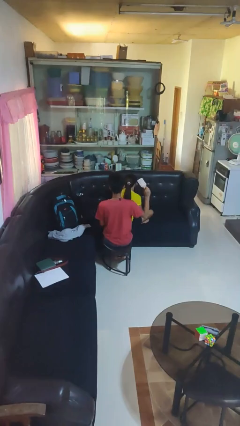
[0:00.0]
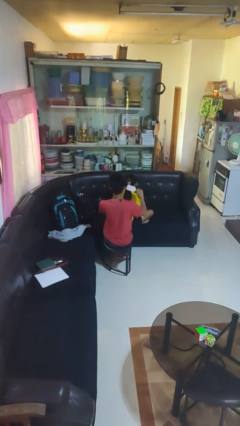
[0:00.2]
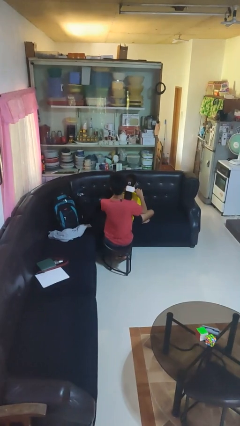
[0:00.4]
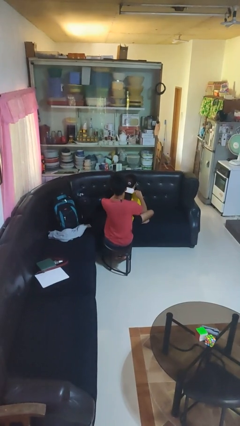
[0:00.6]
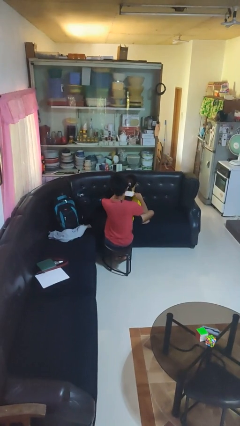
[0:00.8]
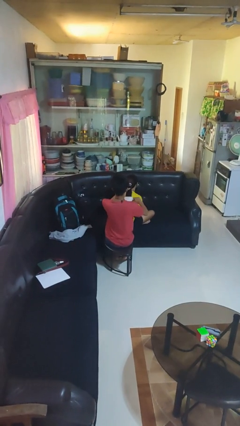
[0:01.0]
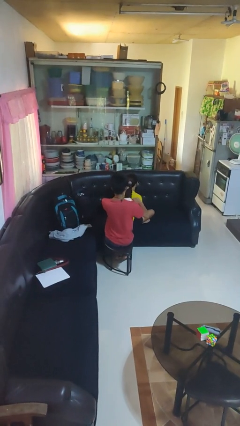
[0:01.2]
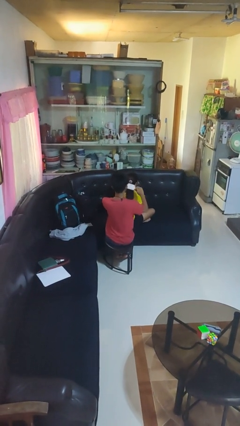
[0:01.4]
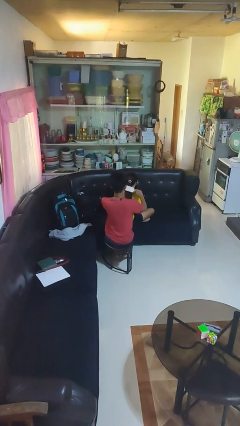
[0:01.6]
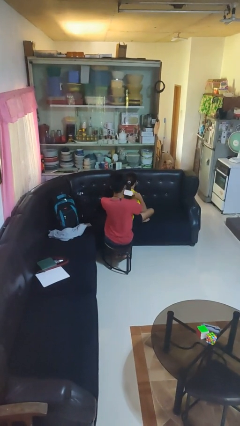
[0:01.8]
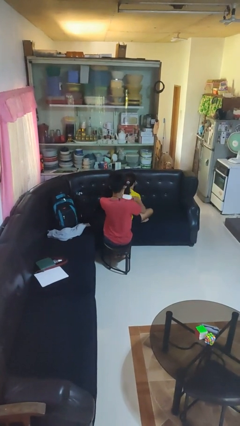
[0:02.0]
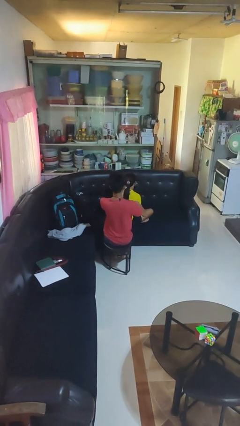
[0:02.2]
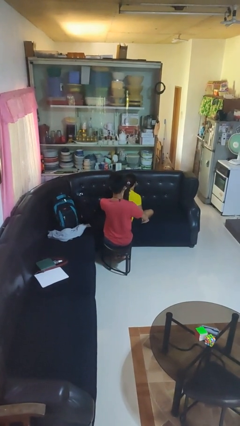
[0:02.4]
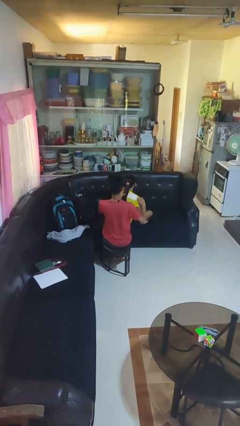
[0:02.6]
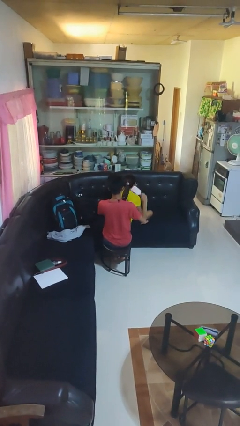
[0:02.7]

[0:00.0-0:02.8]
person brushes hair of person

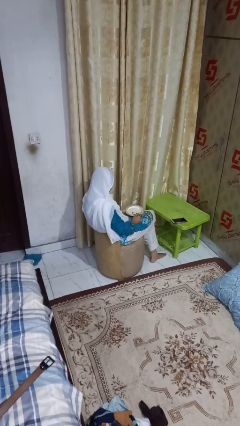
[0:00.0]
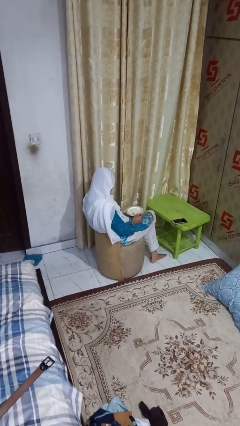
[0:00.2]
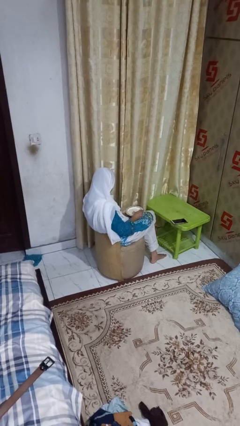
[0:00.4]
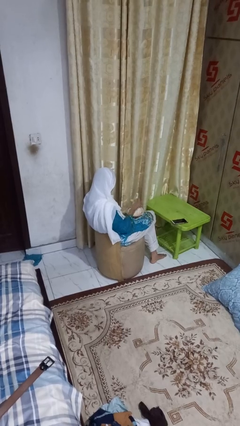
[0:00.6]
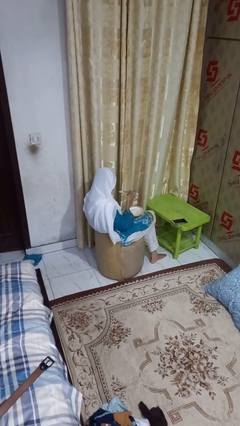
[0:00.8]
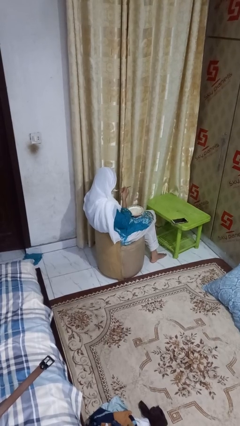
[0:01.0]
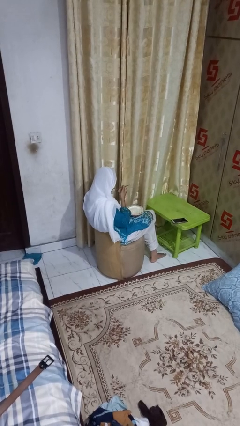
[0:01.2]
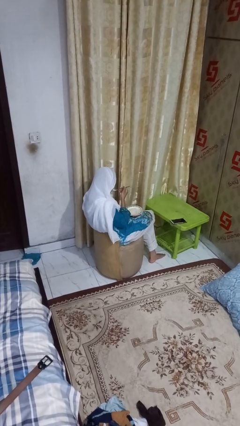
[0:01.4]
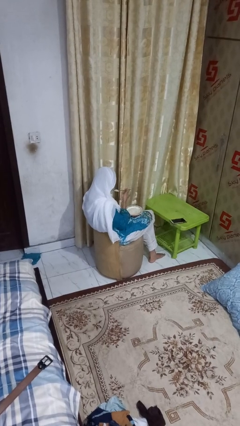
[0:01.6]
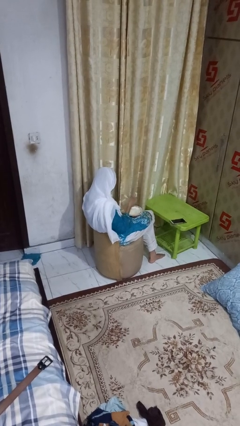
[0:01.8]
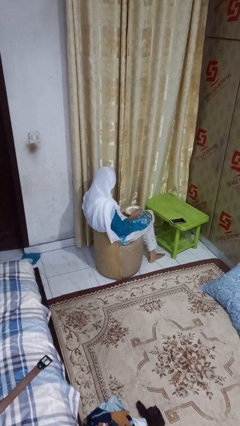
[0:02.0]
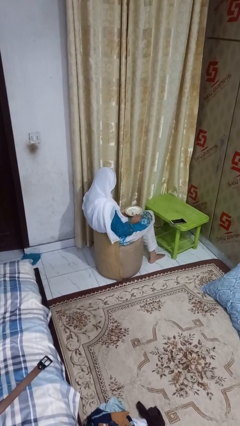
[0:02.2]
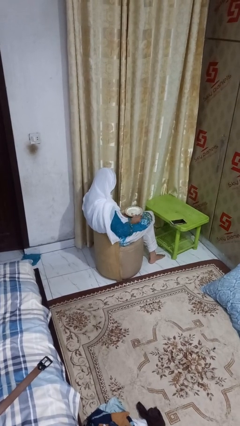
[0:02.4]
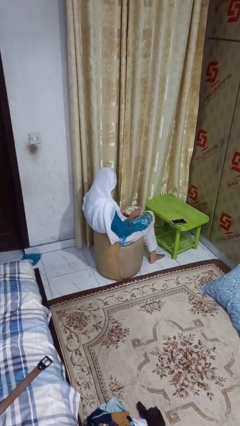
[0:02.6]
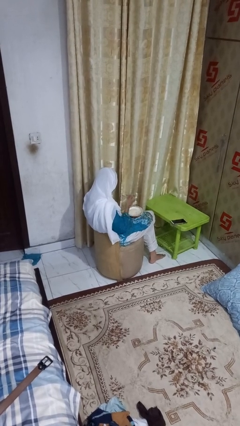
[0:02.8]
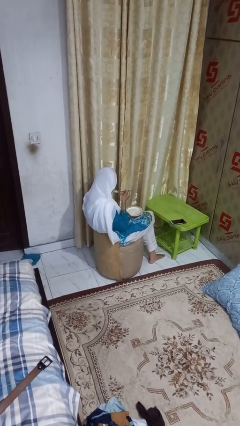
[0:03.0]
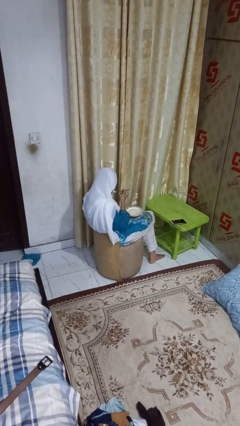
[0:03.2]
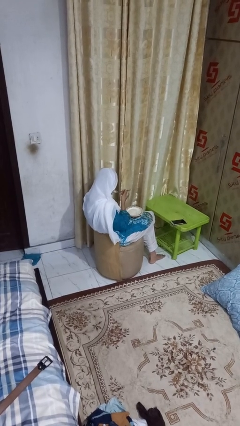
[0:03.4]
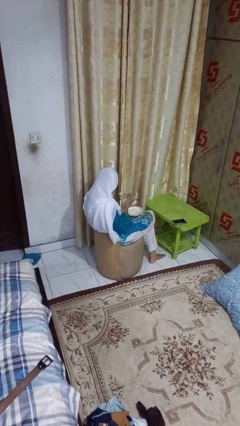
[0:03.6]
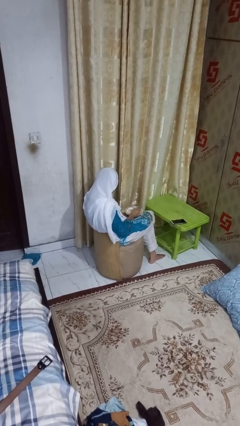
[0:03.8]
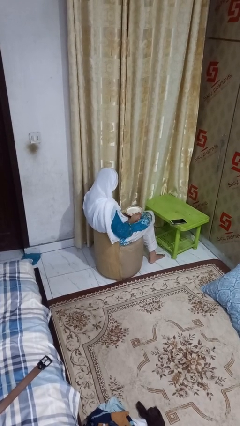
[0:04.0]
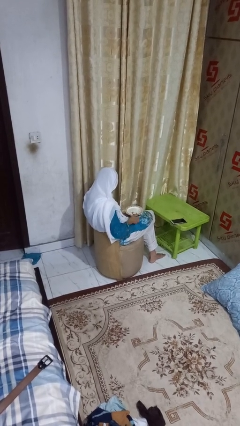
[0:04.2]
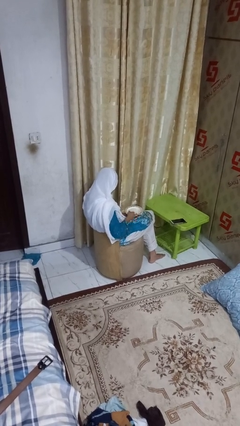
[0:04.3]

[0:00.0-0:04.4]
person eats with utensil

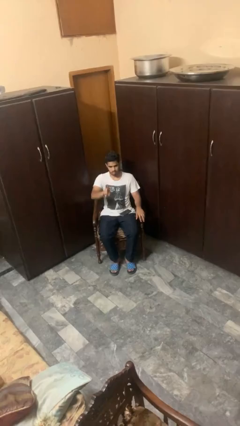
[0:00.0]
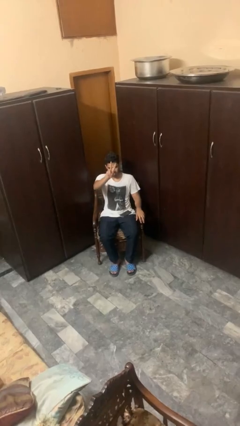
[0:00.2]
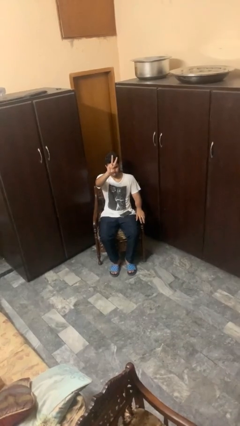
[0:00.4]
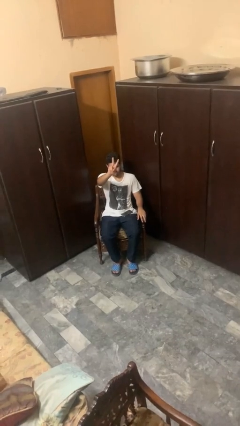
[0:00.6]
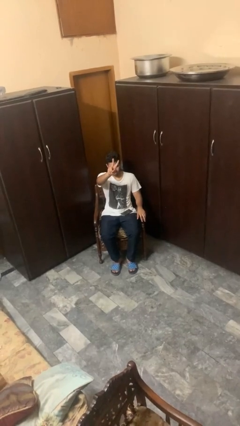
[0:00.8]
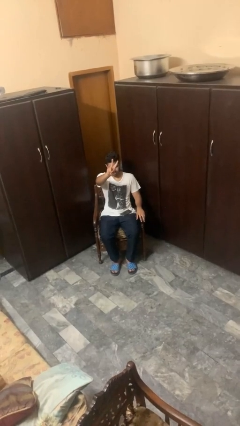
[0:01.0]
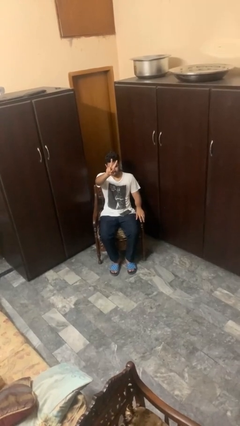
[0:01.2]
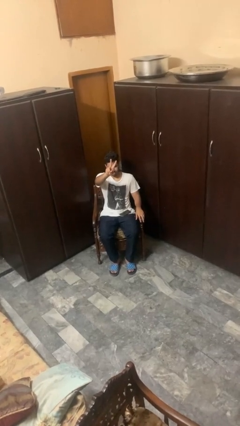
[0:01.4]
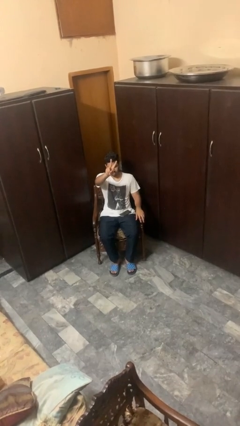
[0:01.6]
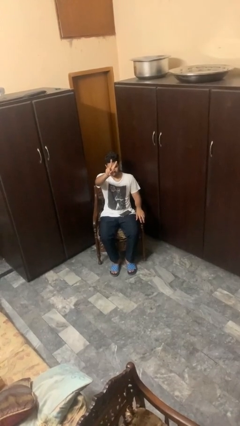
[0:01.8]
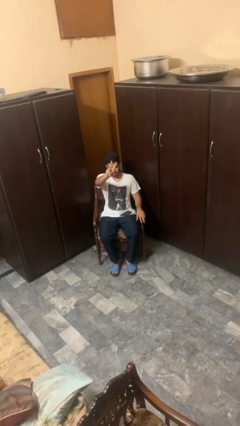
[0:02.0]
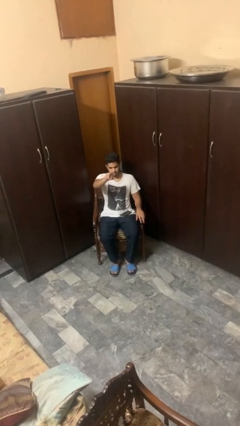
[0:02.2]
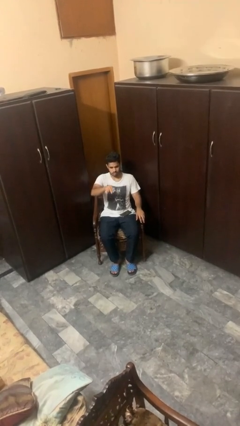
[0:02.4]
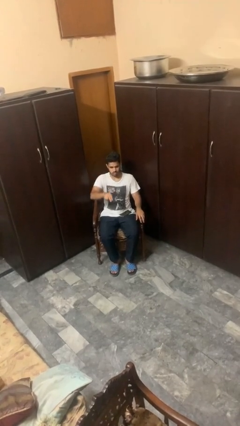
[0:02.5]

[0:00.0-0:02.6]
person gestures peace

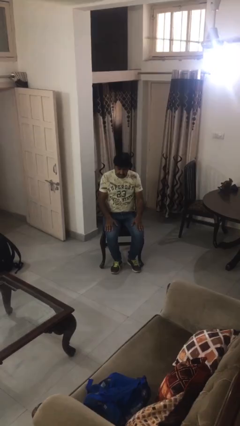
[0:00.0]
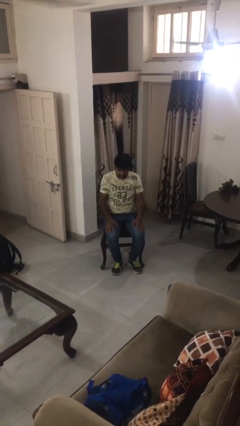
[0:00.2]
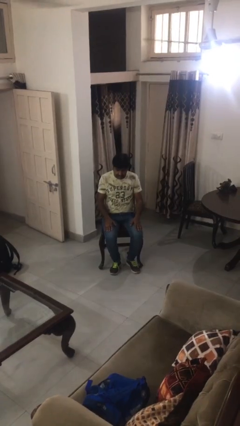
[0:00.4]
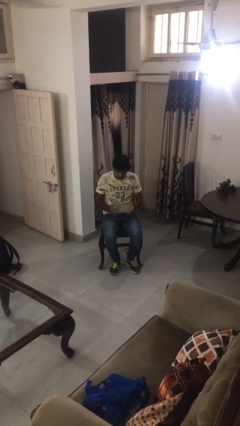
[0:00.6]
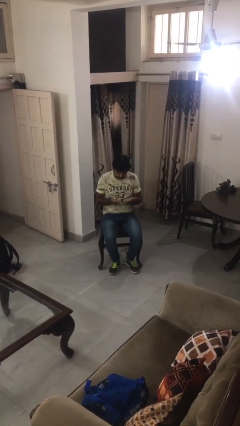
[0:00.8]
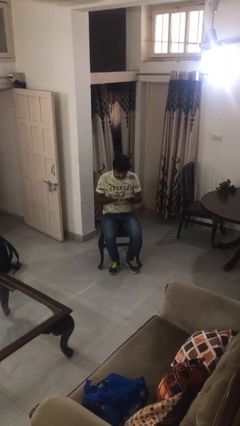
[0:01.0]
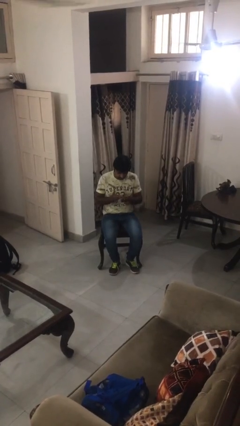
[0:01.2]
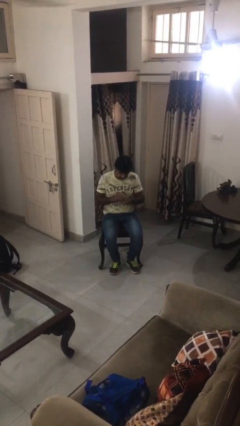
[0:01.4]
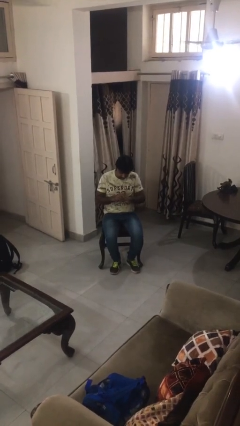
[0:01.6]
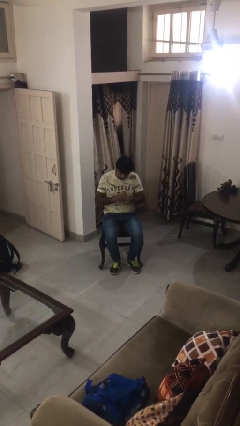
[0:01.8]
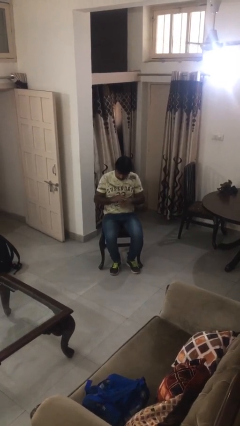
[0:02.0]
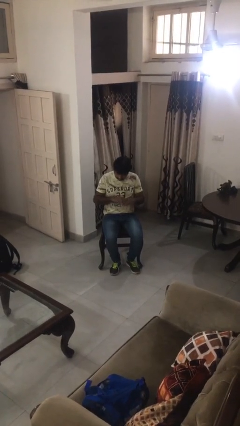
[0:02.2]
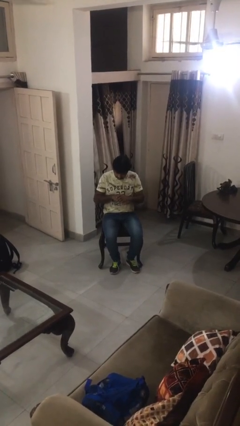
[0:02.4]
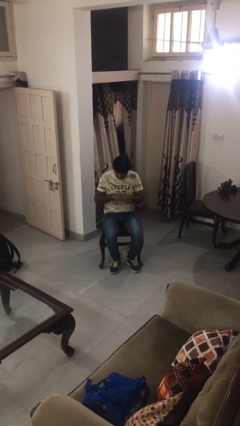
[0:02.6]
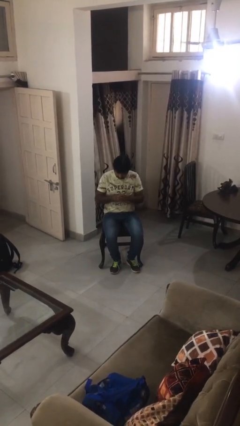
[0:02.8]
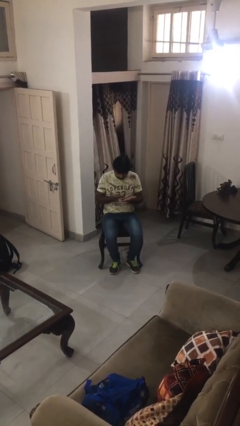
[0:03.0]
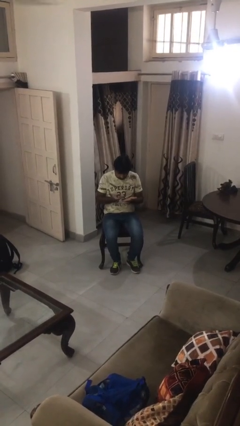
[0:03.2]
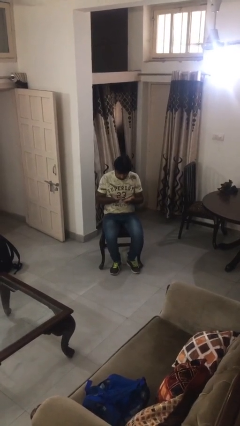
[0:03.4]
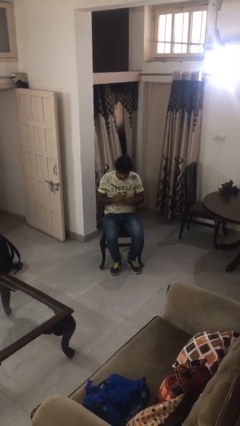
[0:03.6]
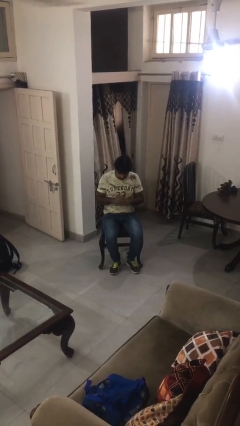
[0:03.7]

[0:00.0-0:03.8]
person looks at hands in lap

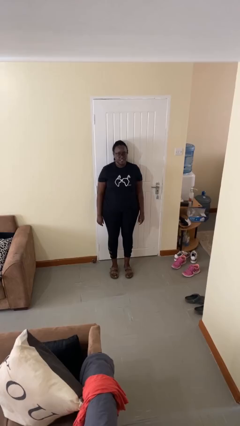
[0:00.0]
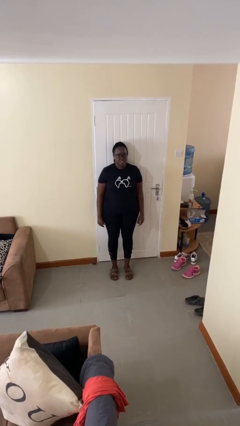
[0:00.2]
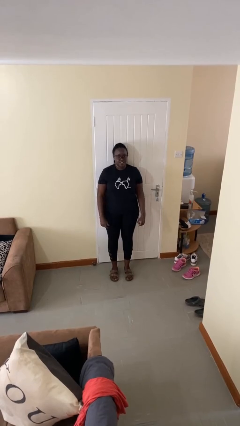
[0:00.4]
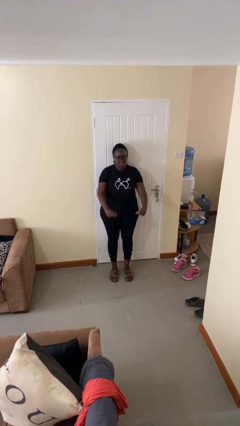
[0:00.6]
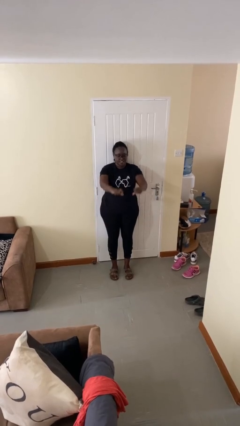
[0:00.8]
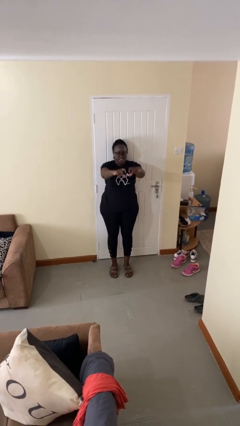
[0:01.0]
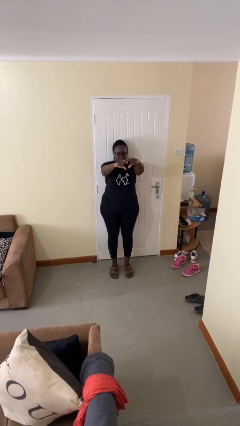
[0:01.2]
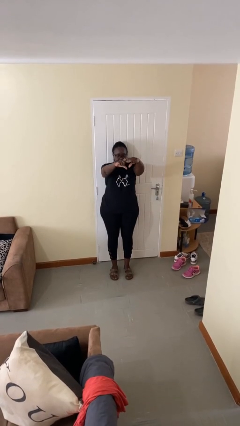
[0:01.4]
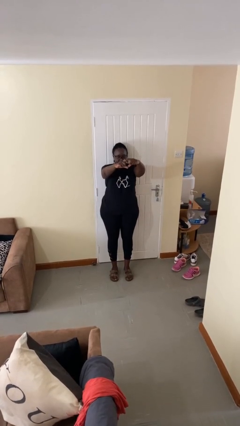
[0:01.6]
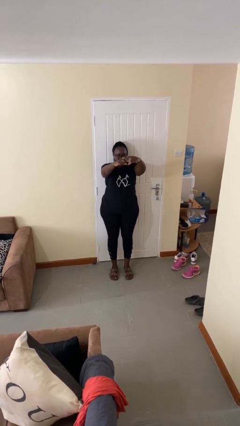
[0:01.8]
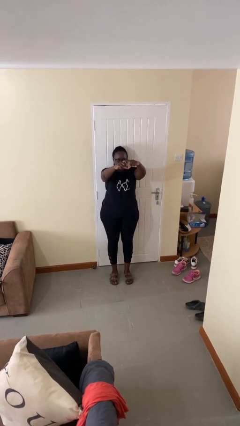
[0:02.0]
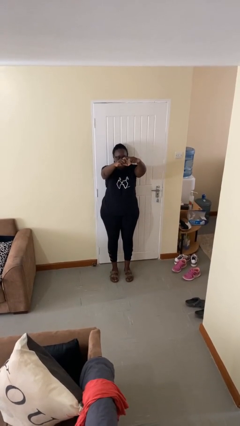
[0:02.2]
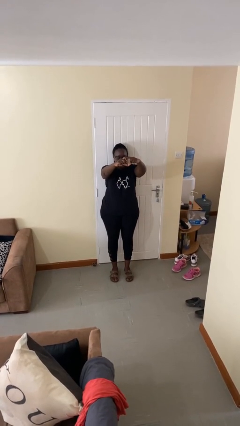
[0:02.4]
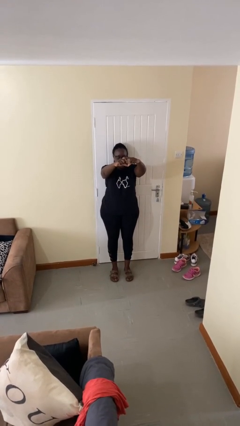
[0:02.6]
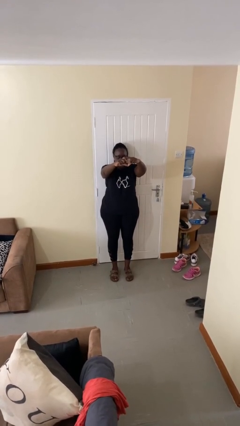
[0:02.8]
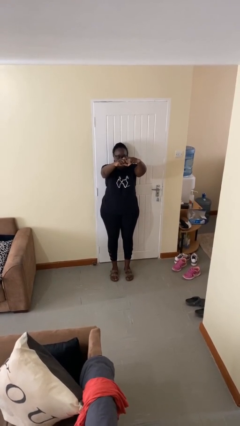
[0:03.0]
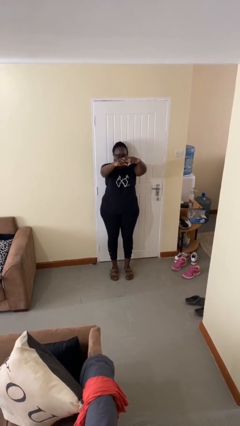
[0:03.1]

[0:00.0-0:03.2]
person gestures heart

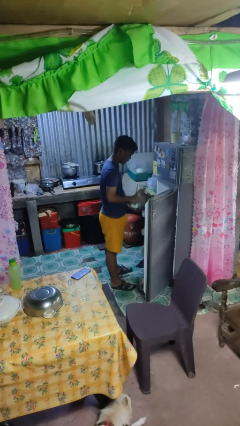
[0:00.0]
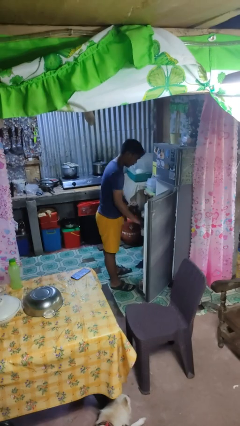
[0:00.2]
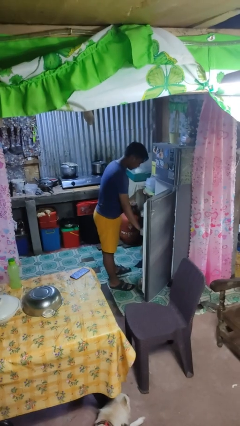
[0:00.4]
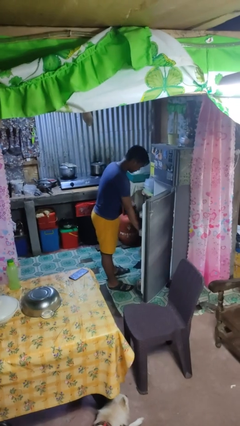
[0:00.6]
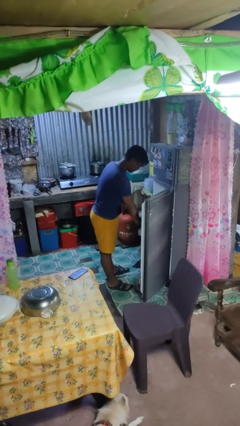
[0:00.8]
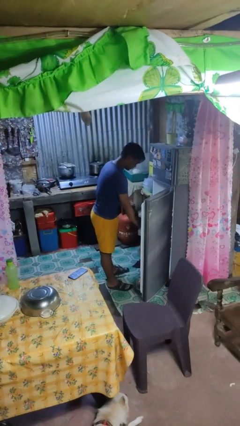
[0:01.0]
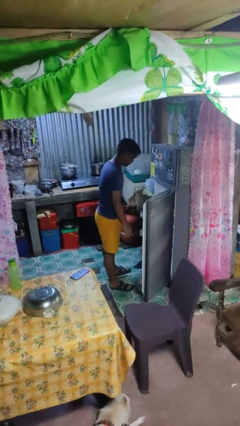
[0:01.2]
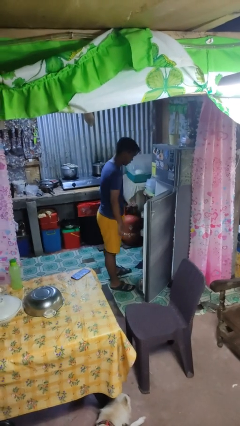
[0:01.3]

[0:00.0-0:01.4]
person puts object into refrigerator
